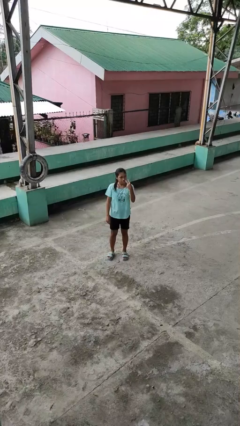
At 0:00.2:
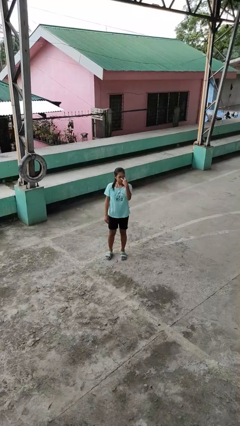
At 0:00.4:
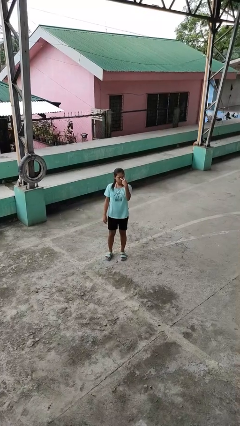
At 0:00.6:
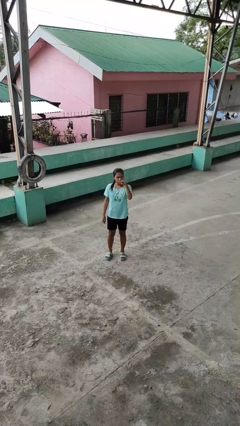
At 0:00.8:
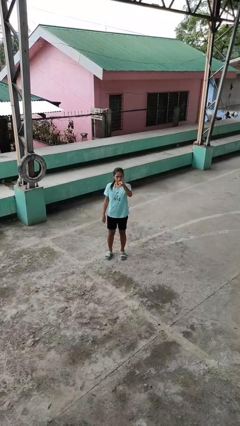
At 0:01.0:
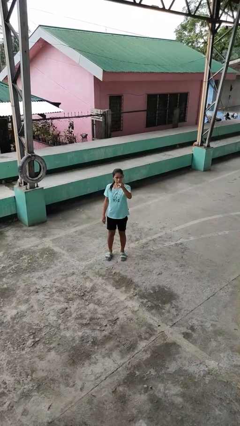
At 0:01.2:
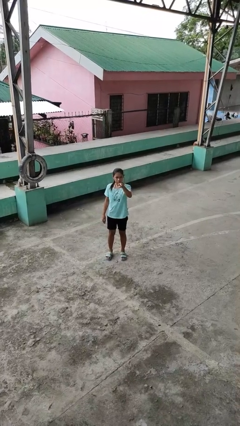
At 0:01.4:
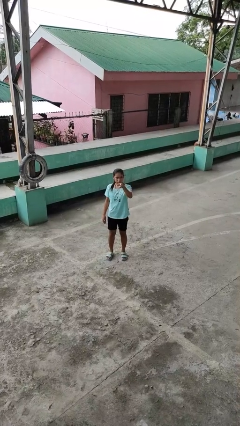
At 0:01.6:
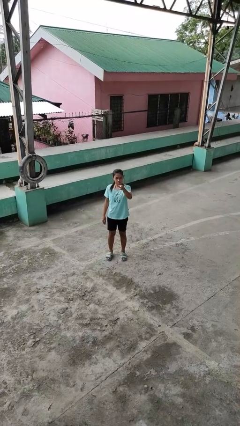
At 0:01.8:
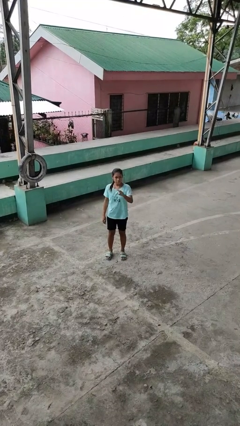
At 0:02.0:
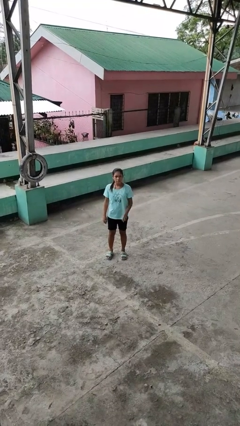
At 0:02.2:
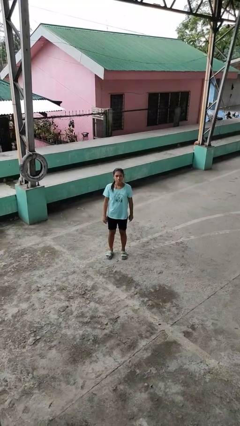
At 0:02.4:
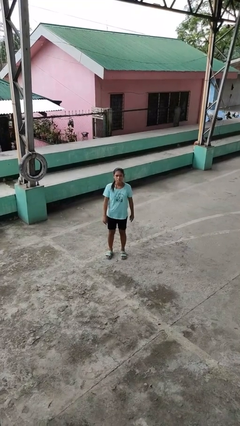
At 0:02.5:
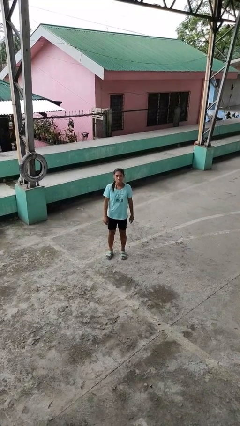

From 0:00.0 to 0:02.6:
person gestures watch closely

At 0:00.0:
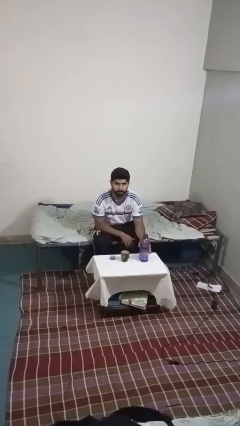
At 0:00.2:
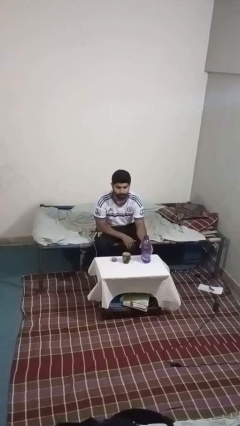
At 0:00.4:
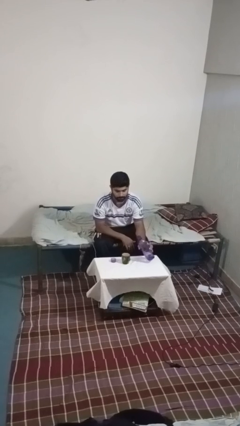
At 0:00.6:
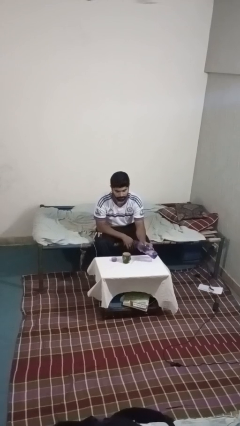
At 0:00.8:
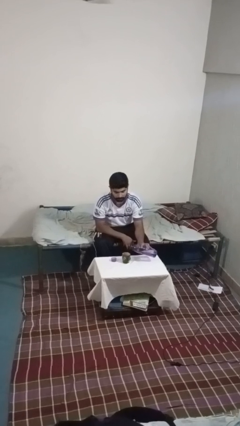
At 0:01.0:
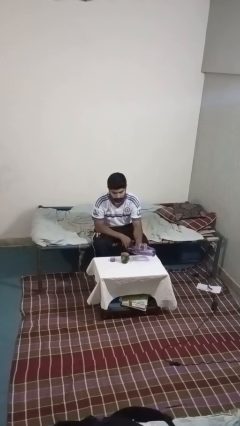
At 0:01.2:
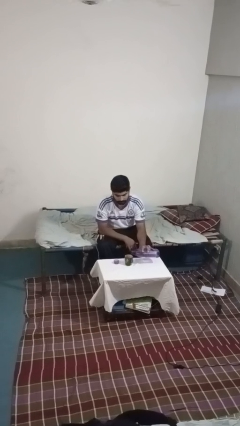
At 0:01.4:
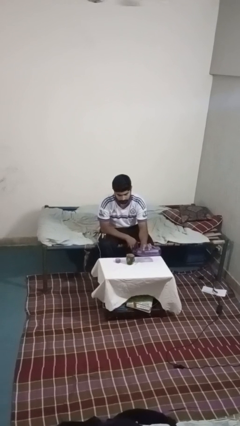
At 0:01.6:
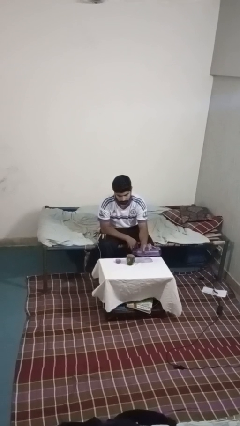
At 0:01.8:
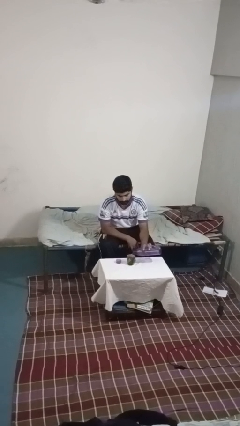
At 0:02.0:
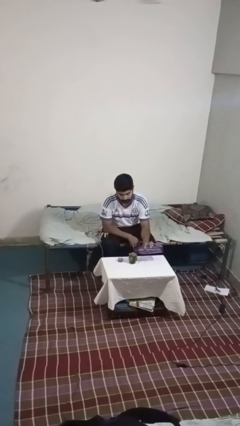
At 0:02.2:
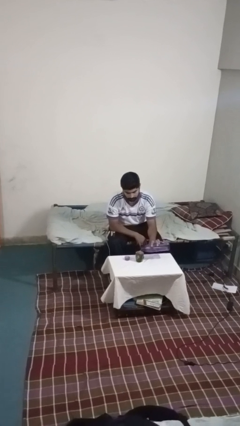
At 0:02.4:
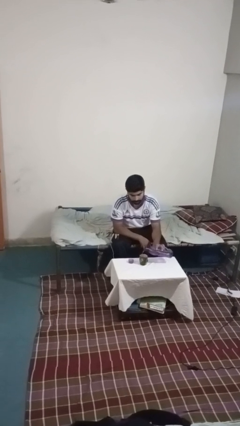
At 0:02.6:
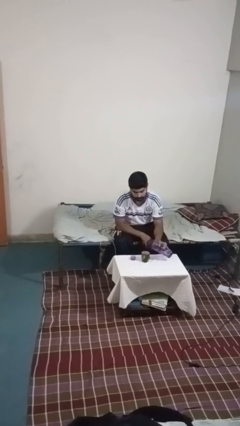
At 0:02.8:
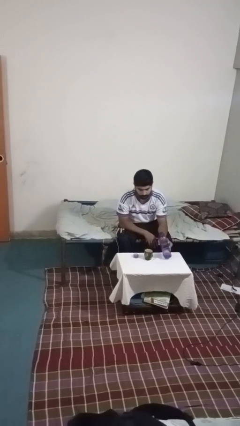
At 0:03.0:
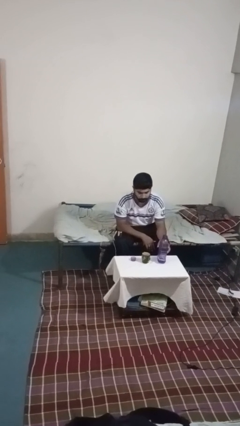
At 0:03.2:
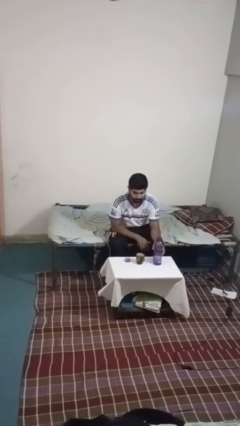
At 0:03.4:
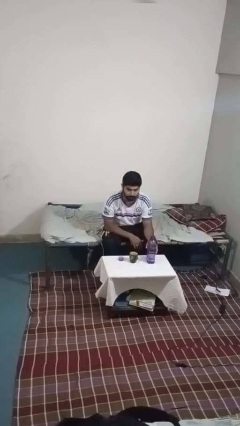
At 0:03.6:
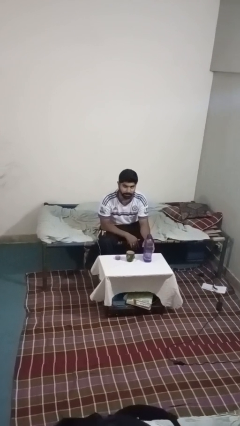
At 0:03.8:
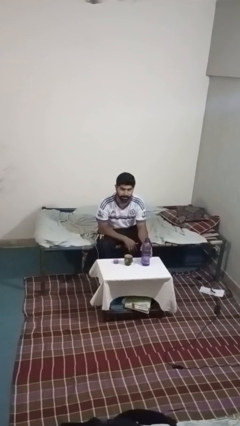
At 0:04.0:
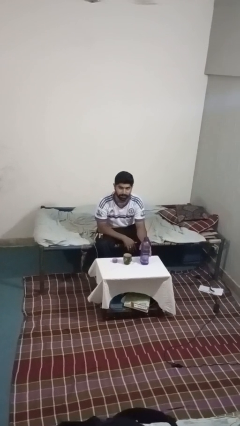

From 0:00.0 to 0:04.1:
person pours liquid into cup

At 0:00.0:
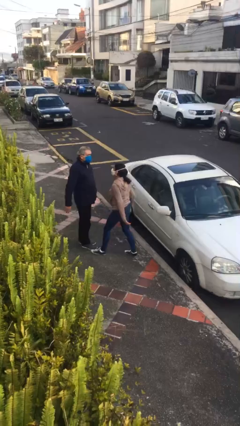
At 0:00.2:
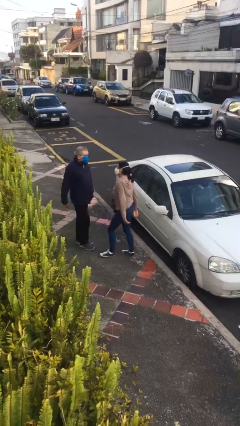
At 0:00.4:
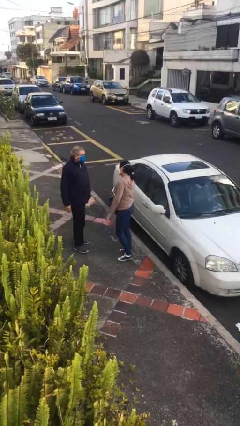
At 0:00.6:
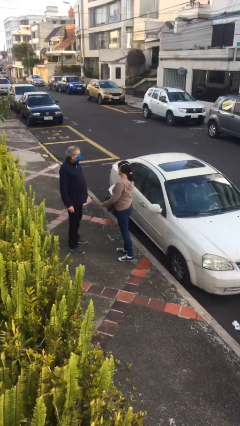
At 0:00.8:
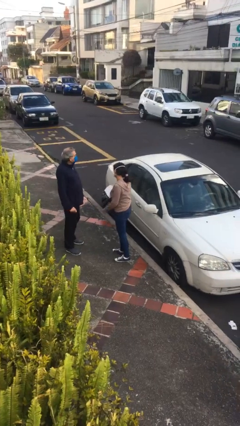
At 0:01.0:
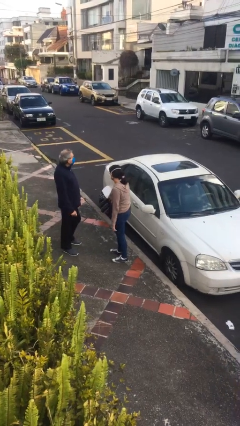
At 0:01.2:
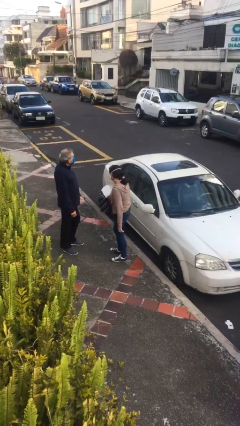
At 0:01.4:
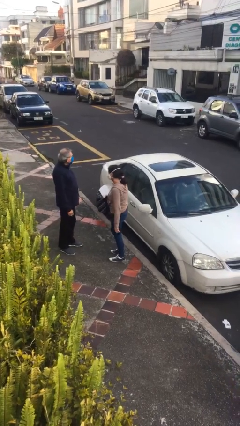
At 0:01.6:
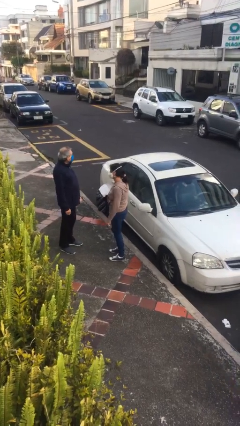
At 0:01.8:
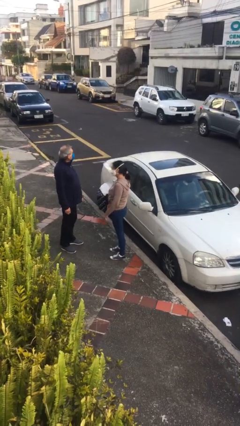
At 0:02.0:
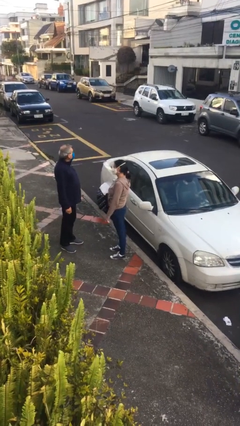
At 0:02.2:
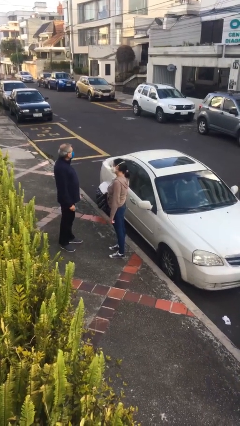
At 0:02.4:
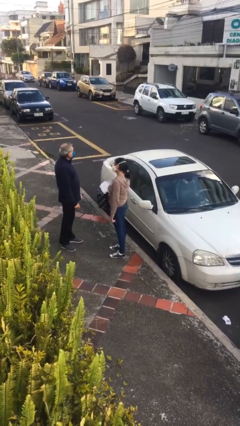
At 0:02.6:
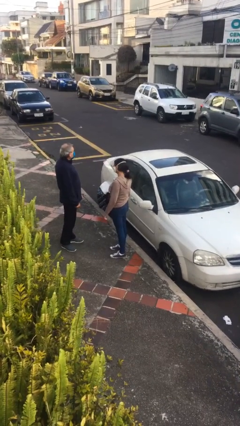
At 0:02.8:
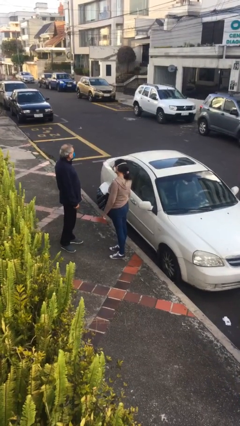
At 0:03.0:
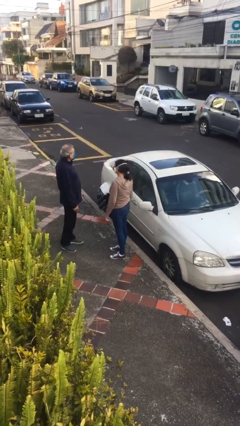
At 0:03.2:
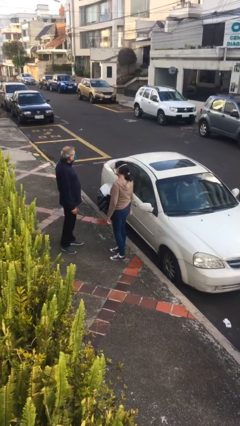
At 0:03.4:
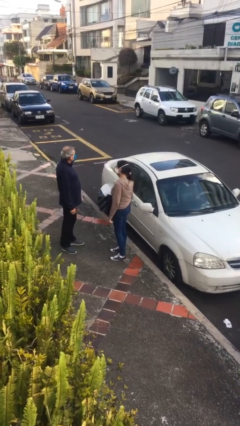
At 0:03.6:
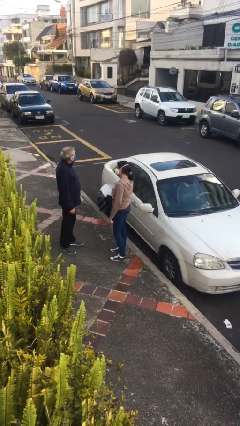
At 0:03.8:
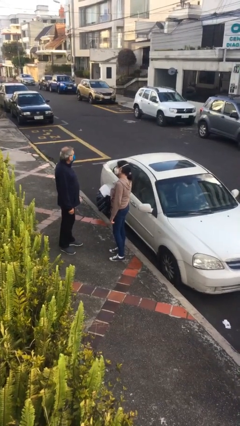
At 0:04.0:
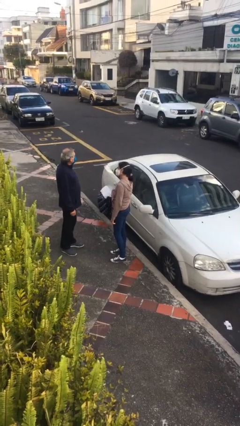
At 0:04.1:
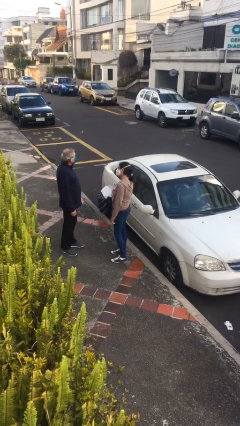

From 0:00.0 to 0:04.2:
person talks to person

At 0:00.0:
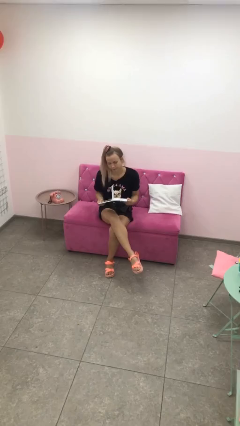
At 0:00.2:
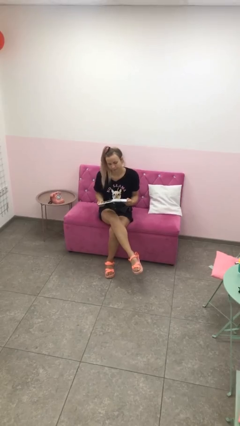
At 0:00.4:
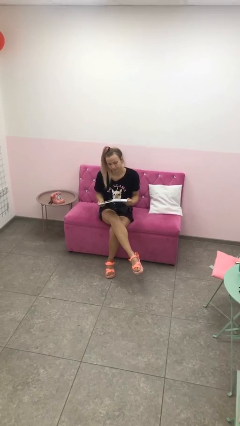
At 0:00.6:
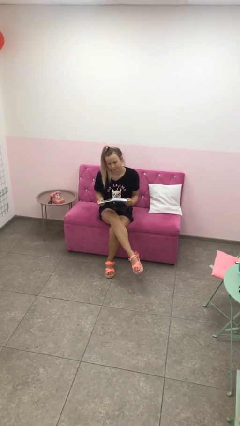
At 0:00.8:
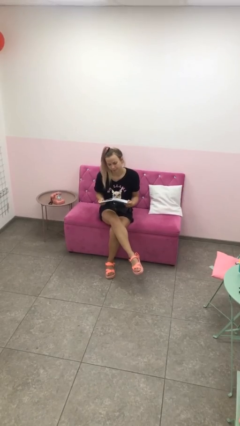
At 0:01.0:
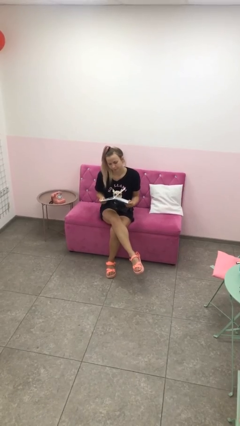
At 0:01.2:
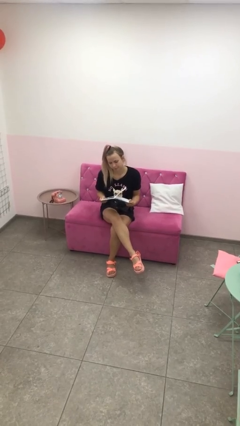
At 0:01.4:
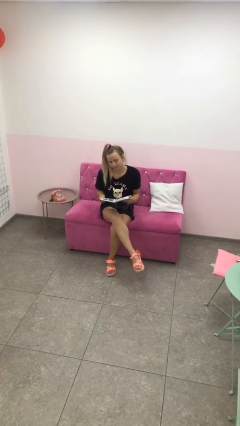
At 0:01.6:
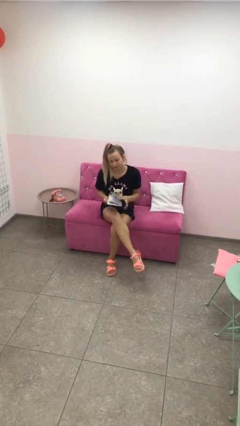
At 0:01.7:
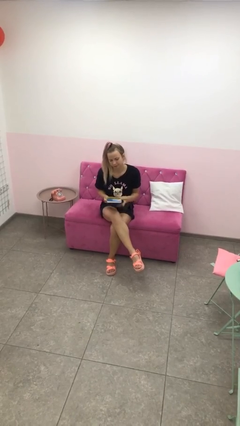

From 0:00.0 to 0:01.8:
person reads book

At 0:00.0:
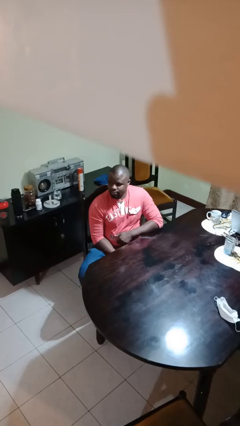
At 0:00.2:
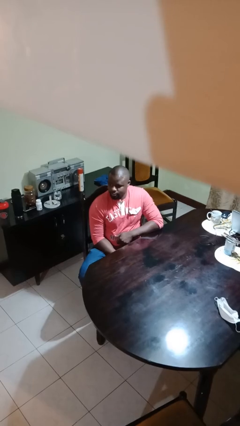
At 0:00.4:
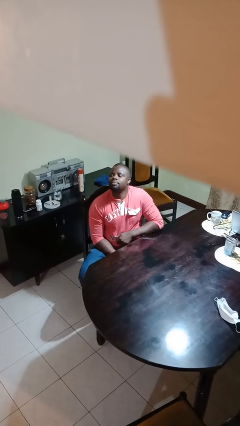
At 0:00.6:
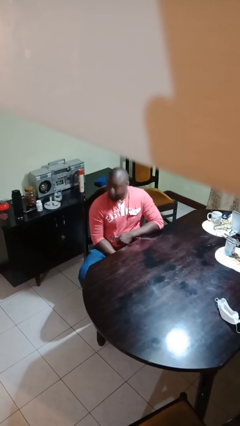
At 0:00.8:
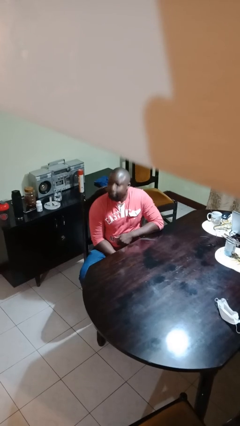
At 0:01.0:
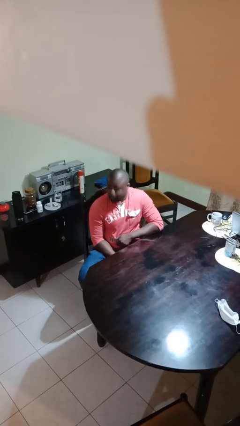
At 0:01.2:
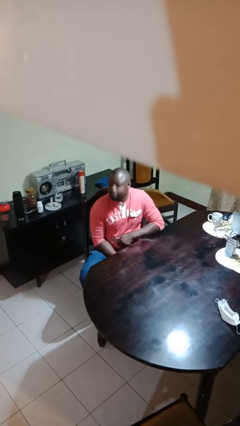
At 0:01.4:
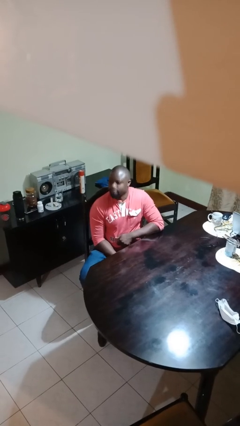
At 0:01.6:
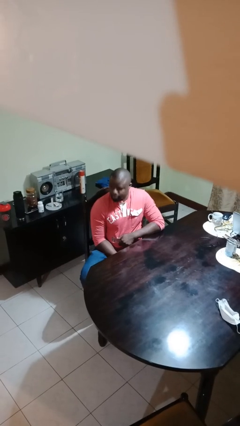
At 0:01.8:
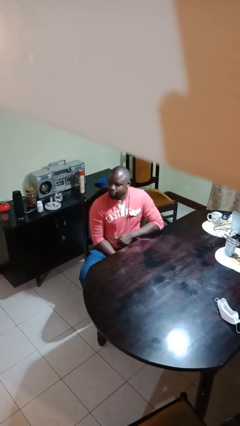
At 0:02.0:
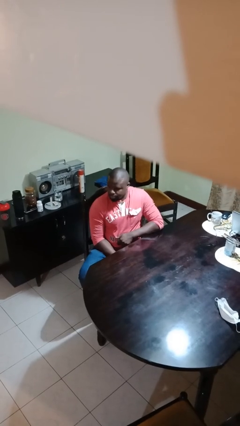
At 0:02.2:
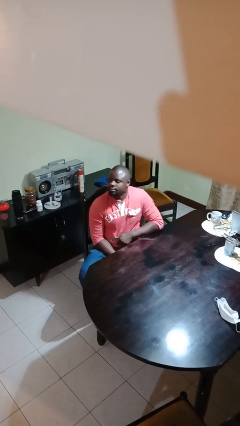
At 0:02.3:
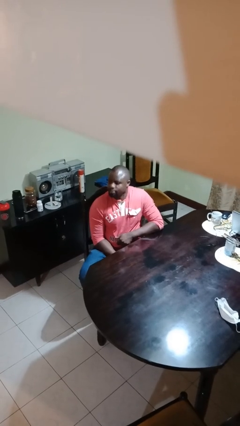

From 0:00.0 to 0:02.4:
person nods head

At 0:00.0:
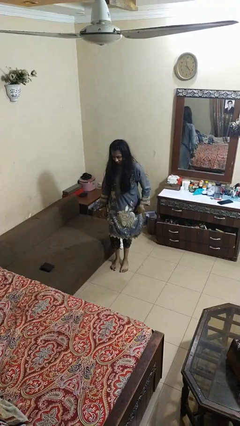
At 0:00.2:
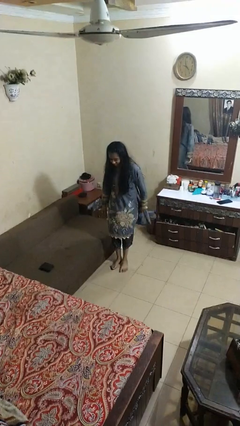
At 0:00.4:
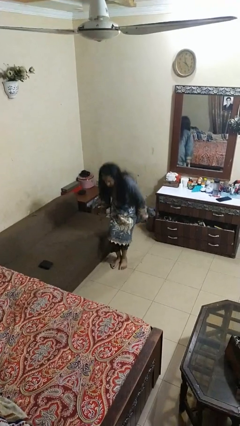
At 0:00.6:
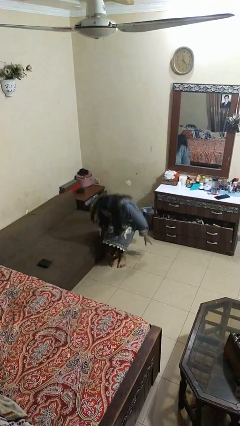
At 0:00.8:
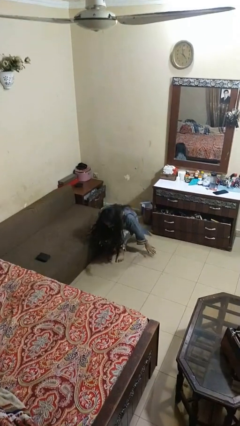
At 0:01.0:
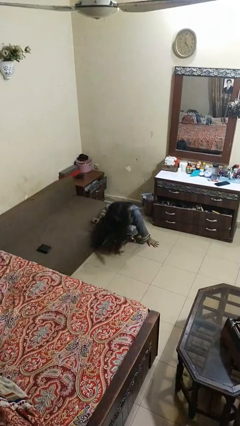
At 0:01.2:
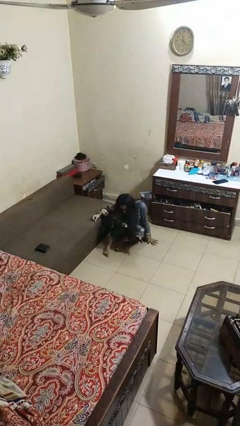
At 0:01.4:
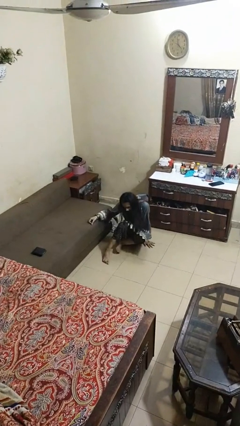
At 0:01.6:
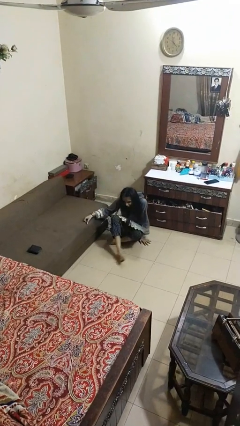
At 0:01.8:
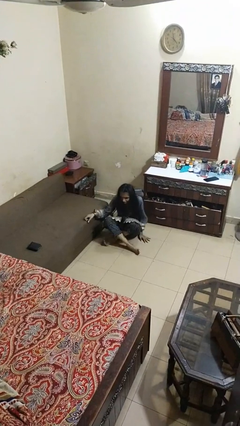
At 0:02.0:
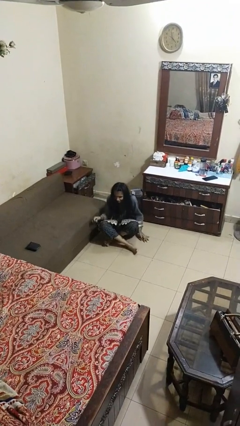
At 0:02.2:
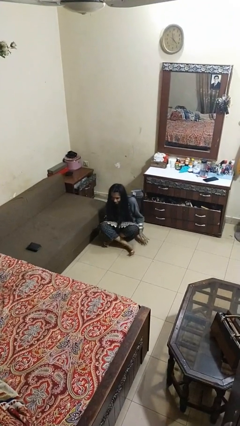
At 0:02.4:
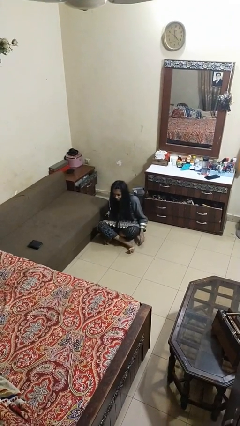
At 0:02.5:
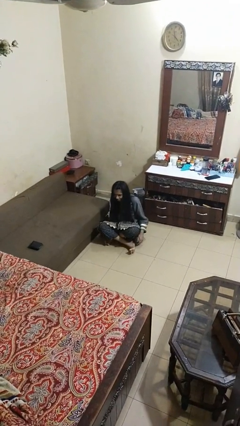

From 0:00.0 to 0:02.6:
person sits crisscross
